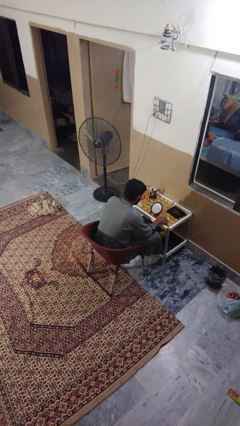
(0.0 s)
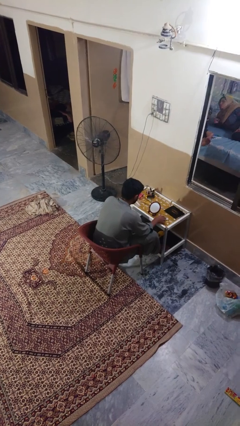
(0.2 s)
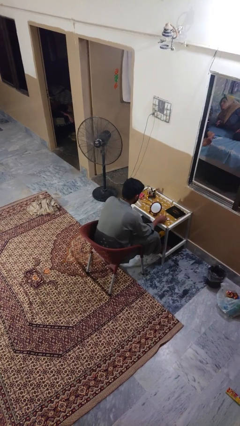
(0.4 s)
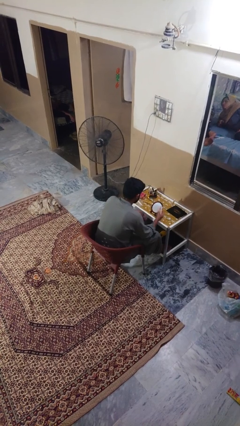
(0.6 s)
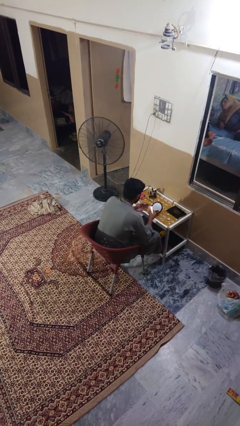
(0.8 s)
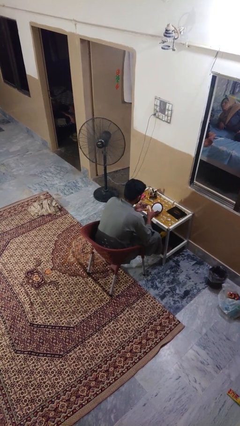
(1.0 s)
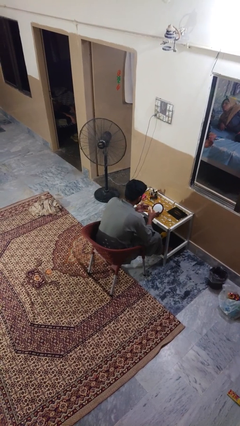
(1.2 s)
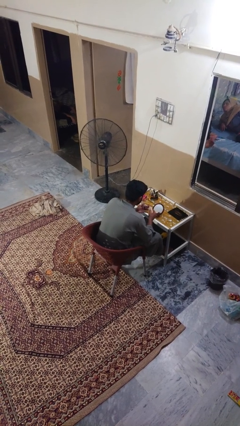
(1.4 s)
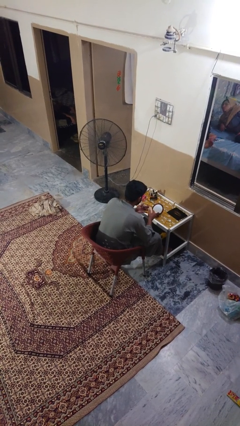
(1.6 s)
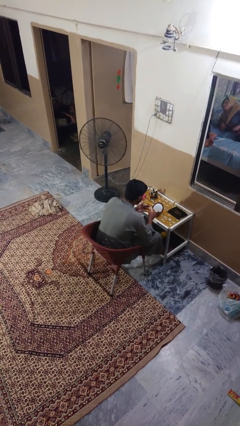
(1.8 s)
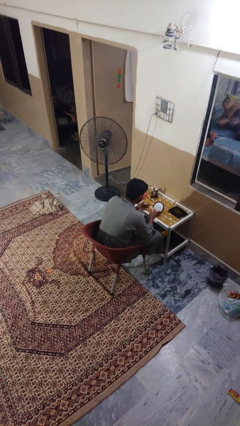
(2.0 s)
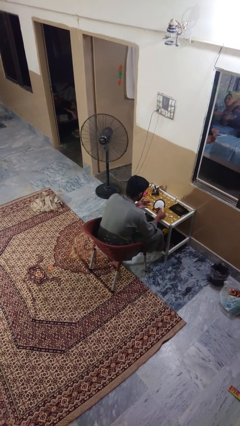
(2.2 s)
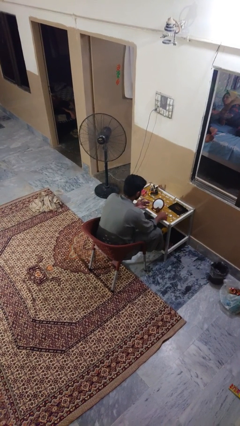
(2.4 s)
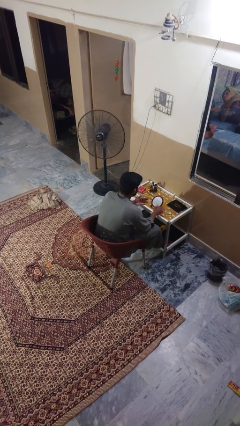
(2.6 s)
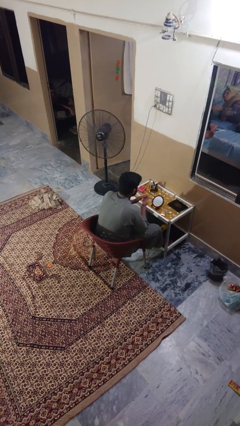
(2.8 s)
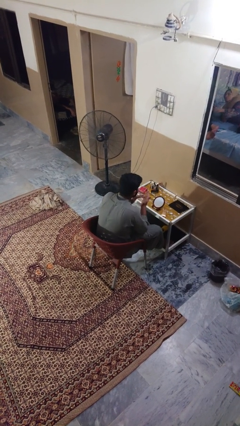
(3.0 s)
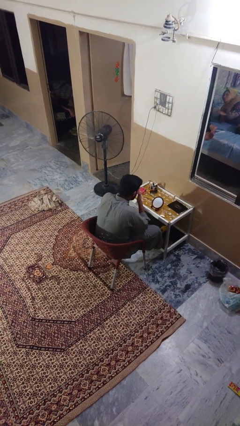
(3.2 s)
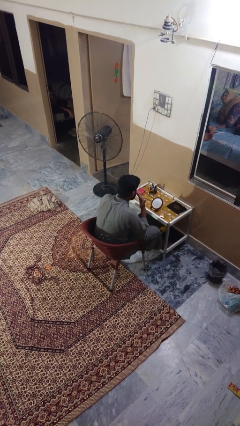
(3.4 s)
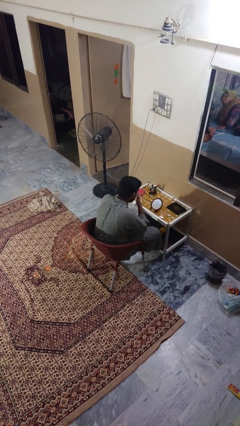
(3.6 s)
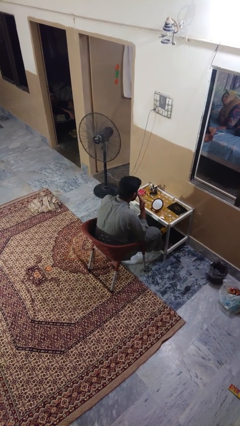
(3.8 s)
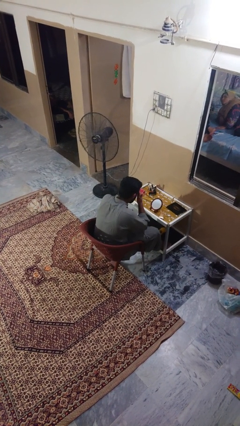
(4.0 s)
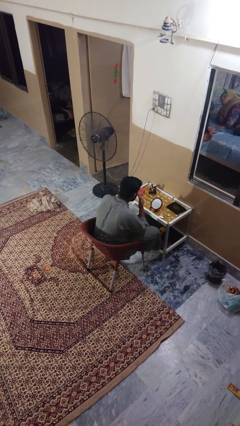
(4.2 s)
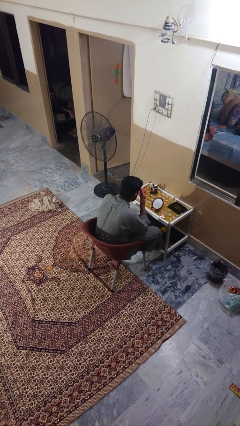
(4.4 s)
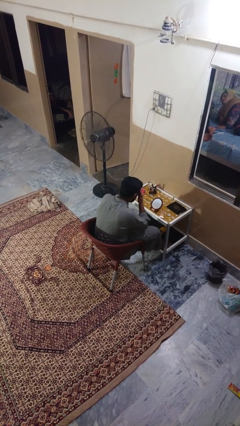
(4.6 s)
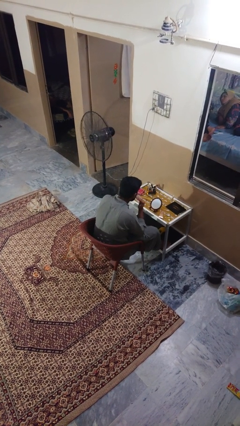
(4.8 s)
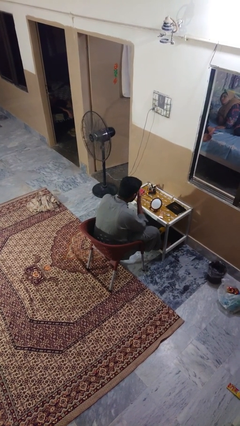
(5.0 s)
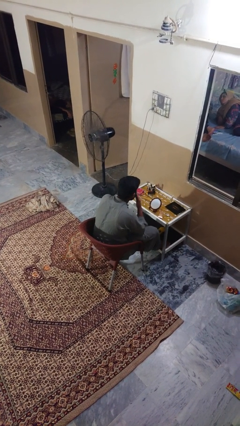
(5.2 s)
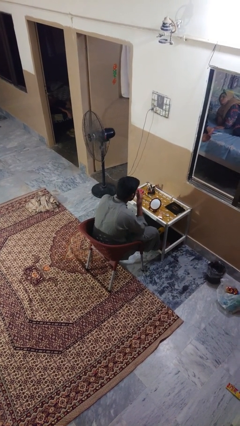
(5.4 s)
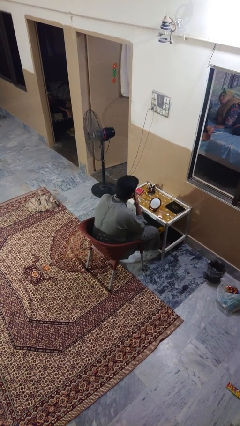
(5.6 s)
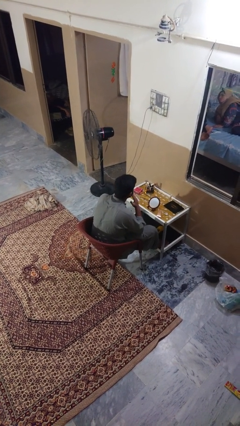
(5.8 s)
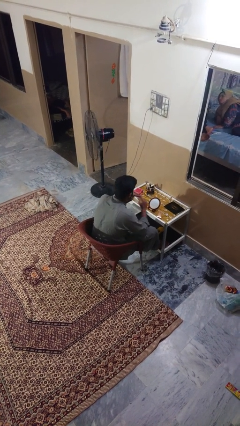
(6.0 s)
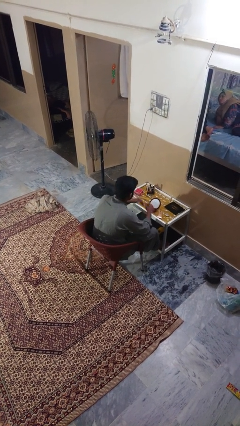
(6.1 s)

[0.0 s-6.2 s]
person applies foundation makeup

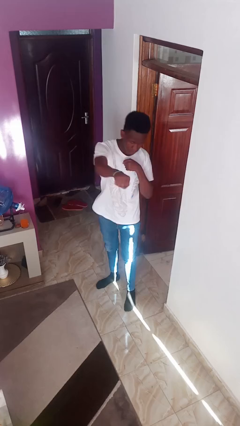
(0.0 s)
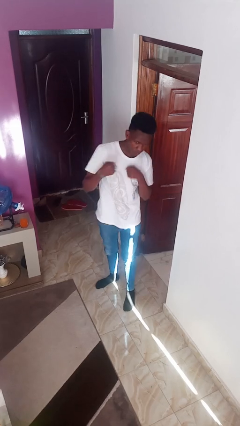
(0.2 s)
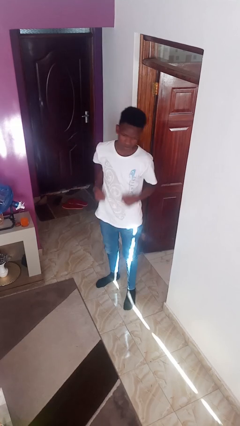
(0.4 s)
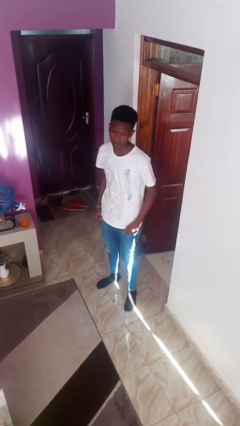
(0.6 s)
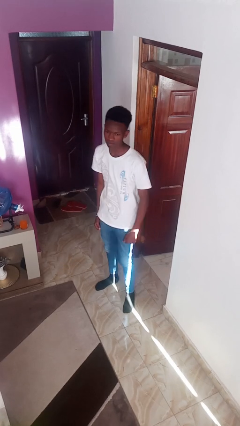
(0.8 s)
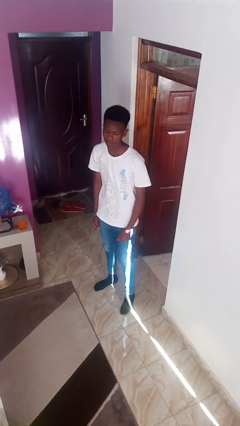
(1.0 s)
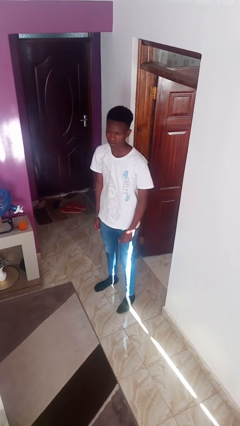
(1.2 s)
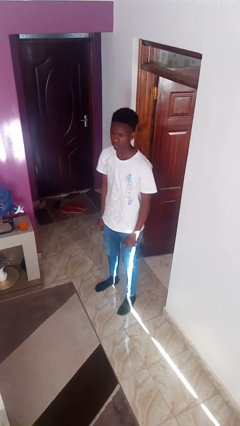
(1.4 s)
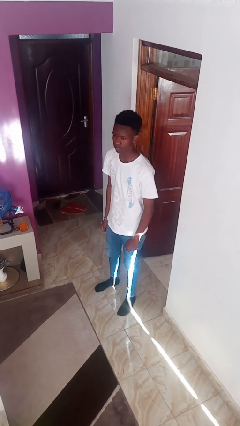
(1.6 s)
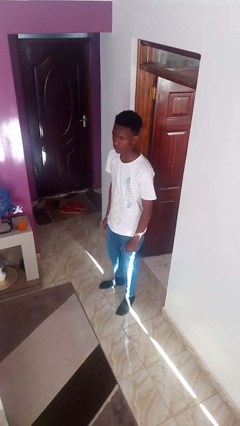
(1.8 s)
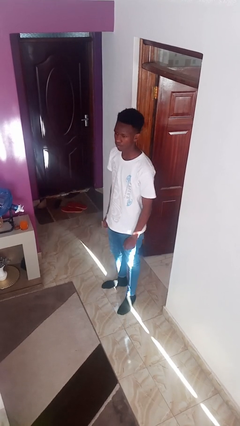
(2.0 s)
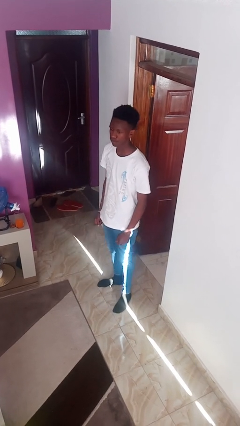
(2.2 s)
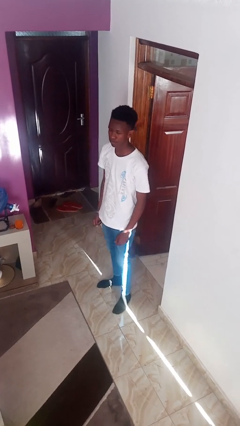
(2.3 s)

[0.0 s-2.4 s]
person punches

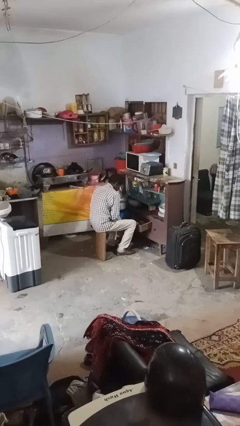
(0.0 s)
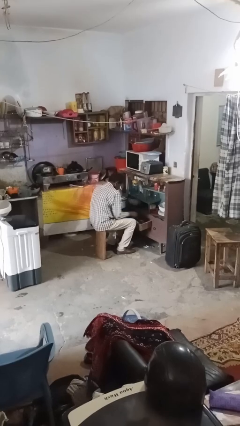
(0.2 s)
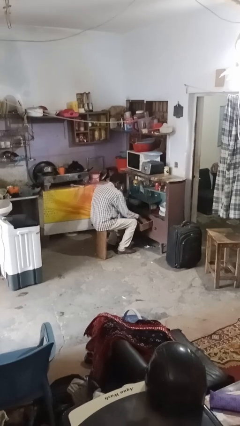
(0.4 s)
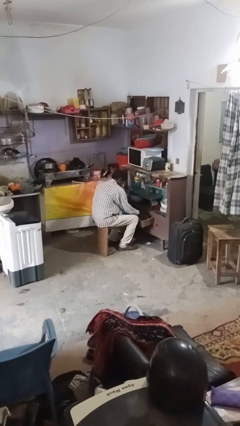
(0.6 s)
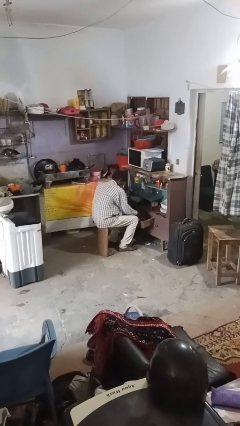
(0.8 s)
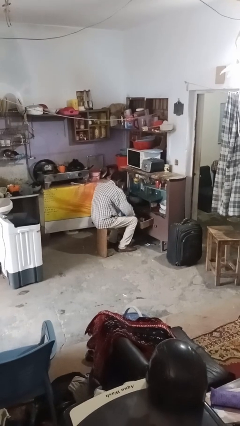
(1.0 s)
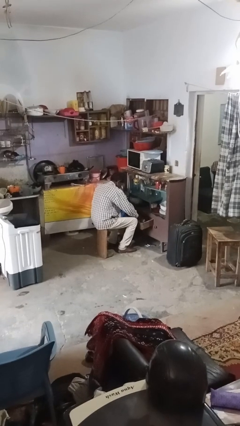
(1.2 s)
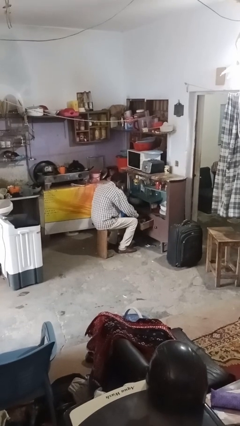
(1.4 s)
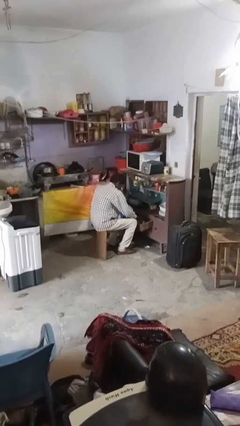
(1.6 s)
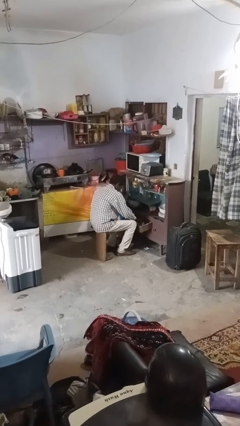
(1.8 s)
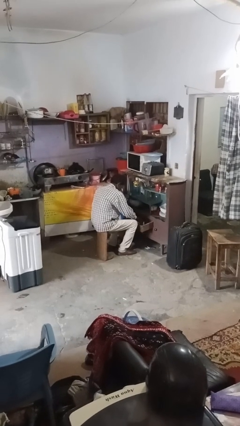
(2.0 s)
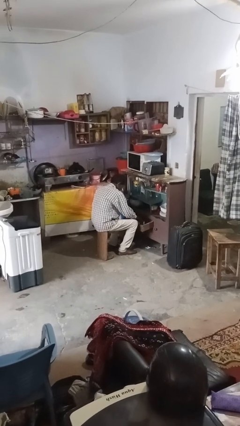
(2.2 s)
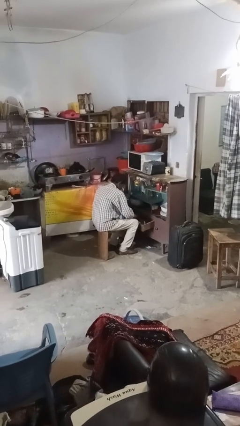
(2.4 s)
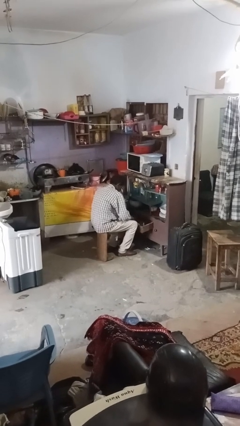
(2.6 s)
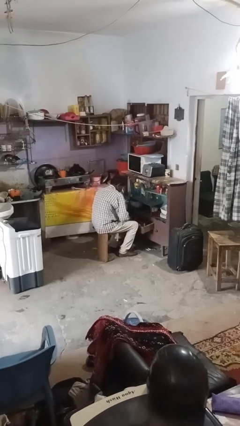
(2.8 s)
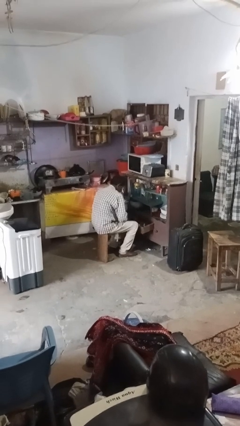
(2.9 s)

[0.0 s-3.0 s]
person searches in kitchen drawer

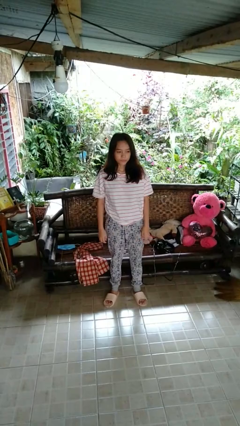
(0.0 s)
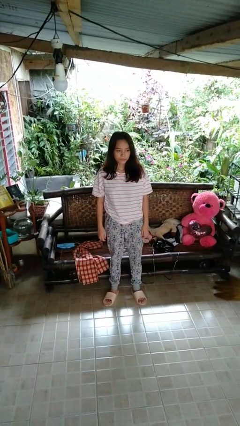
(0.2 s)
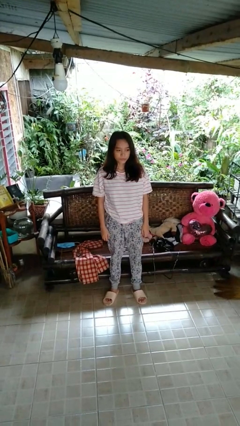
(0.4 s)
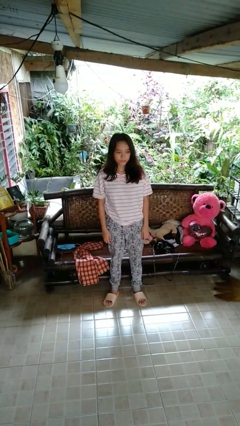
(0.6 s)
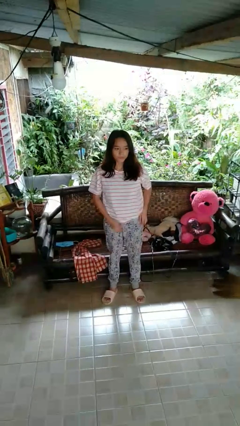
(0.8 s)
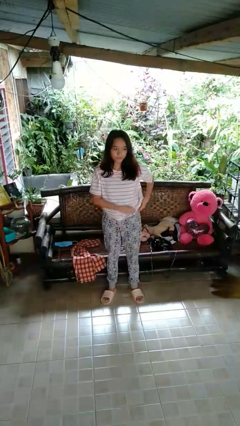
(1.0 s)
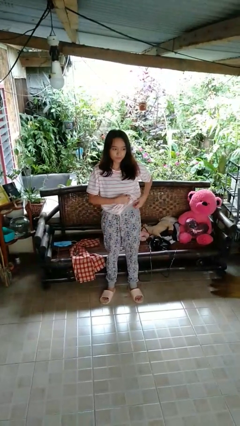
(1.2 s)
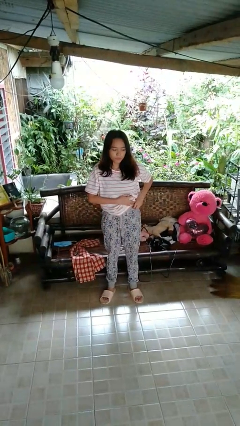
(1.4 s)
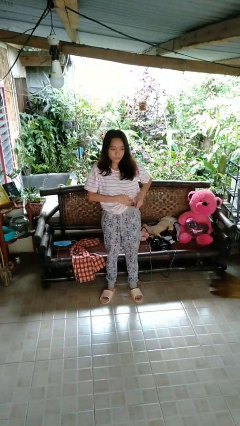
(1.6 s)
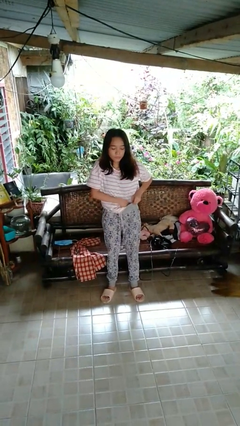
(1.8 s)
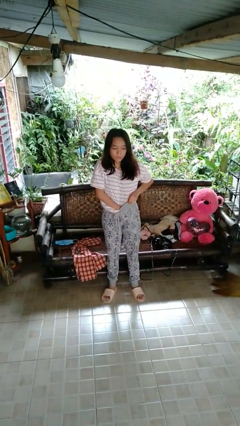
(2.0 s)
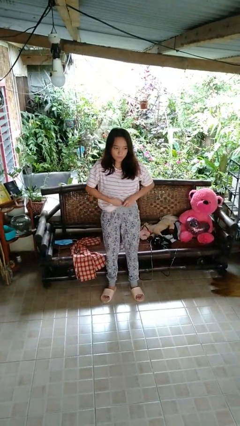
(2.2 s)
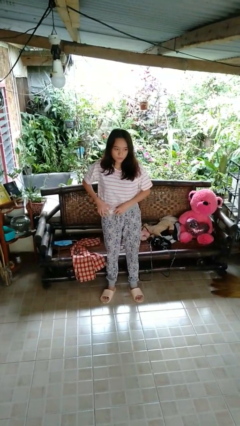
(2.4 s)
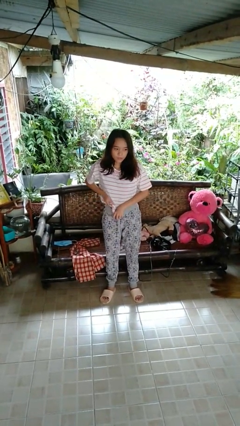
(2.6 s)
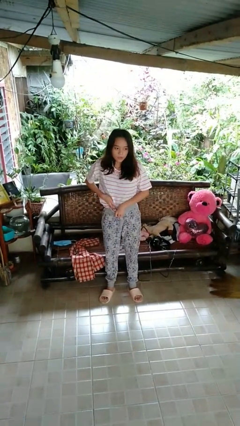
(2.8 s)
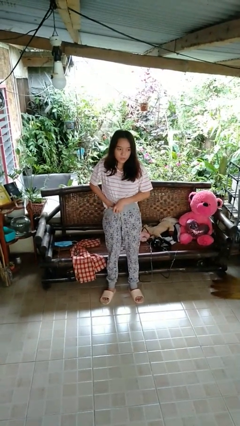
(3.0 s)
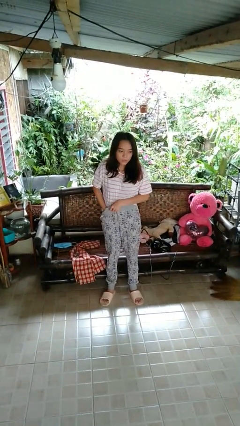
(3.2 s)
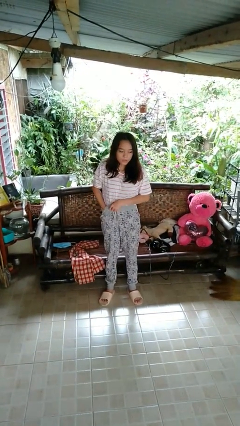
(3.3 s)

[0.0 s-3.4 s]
person tucks in shirt

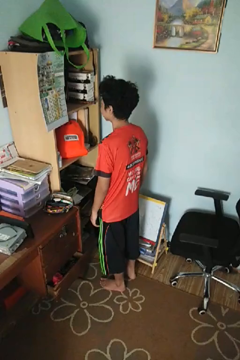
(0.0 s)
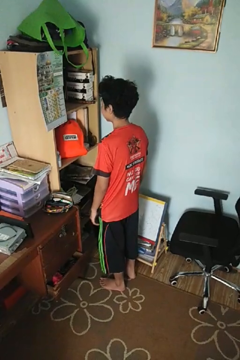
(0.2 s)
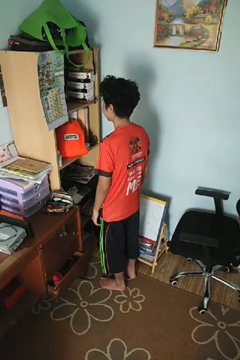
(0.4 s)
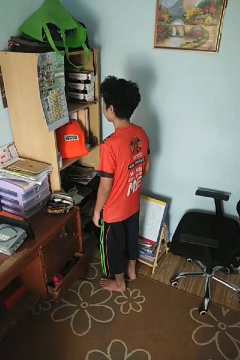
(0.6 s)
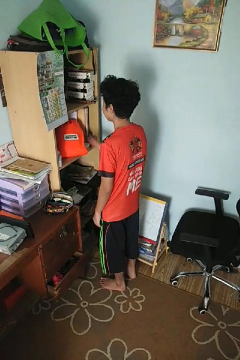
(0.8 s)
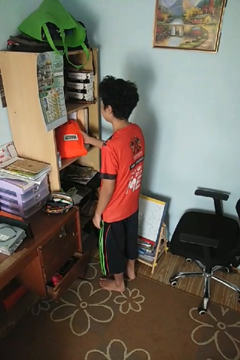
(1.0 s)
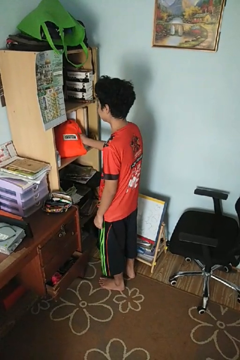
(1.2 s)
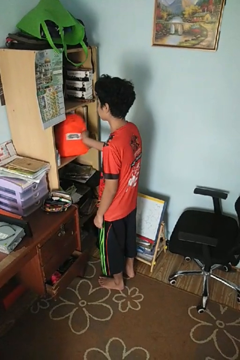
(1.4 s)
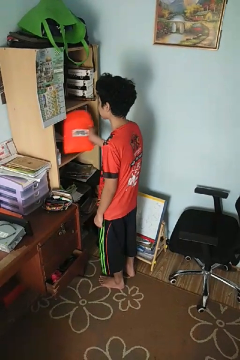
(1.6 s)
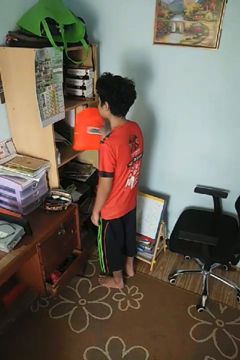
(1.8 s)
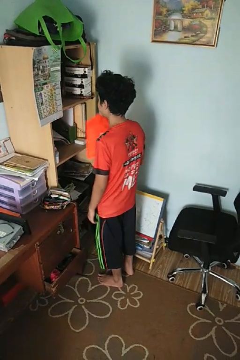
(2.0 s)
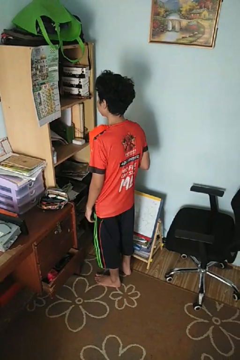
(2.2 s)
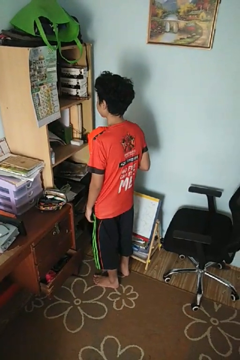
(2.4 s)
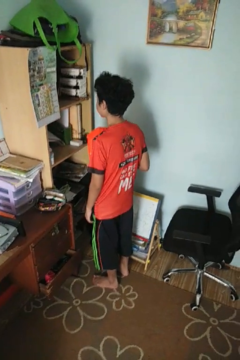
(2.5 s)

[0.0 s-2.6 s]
person picks up object from cabinet

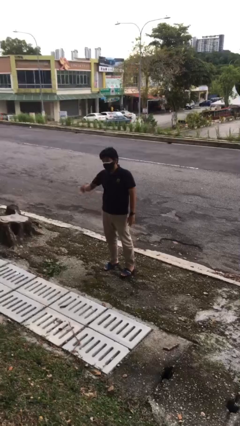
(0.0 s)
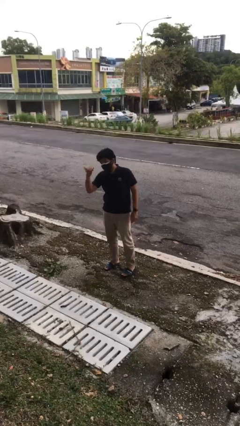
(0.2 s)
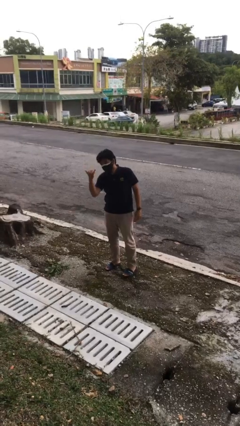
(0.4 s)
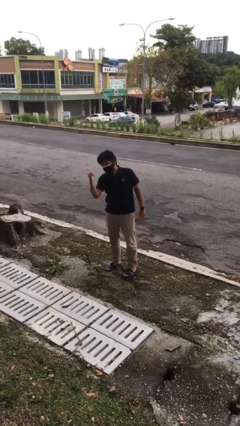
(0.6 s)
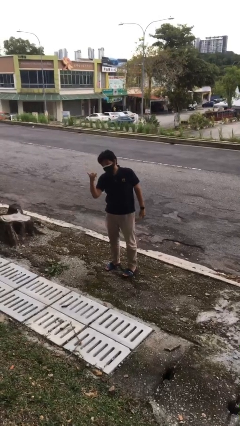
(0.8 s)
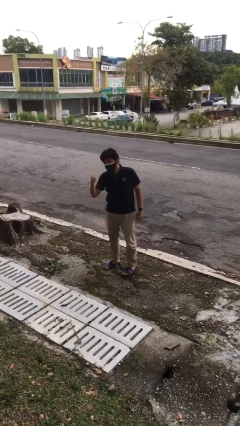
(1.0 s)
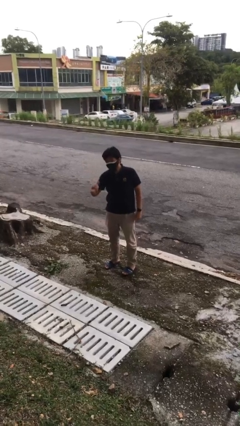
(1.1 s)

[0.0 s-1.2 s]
person gestures hang loose
